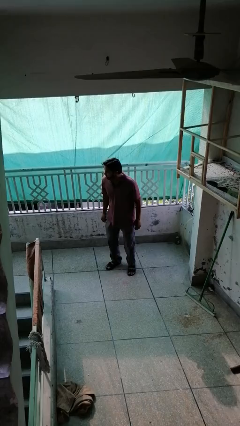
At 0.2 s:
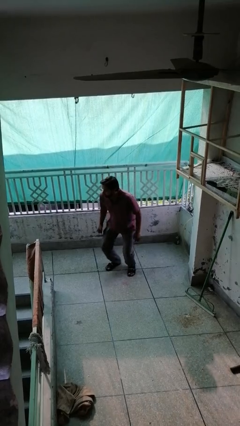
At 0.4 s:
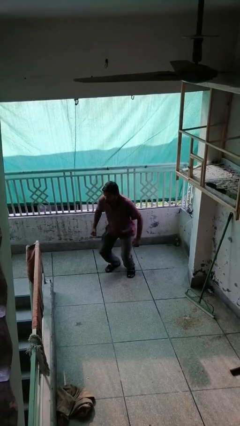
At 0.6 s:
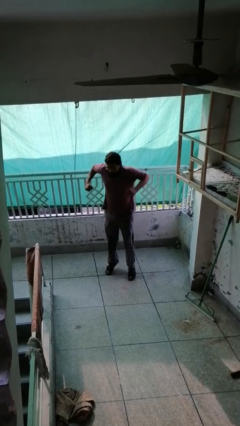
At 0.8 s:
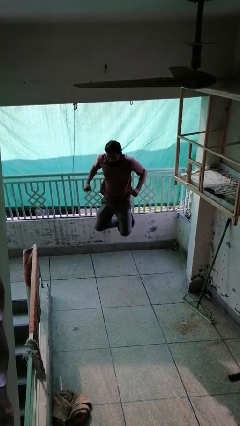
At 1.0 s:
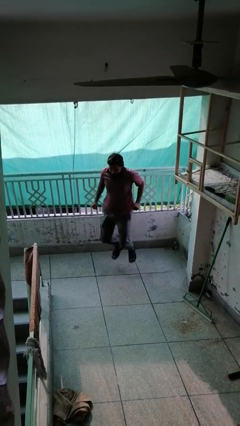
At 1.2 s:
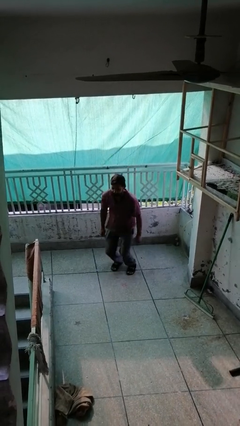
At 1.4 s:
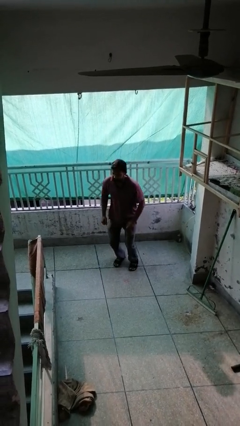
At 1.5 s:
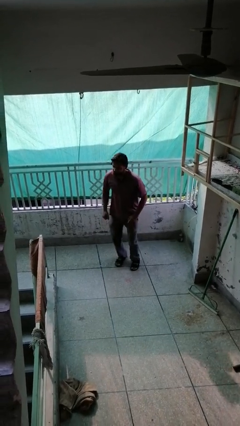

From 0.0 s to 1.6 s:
person jumps

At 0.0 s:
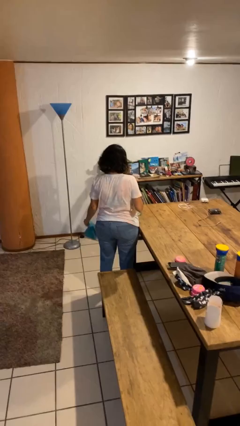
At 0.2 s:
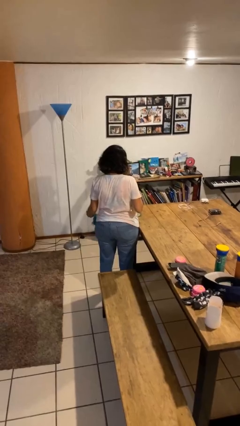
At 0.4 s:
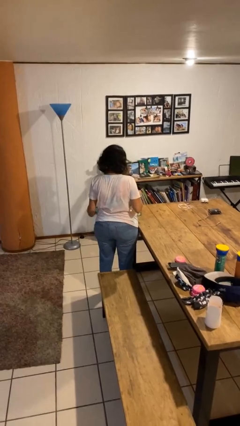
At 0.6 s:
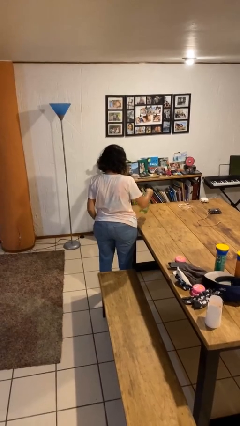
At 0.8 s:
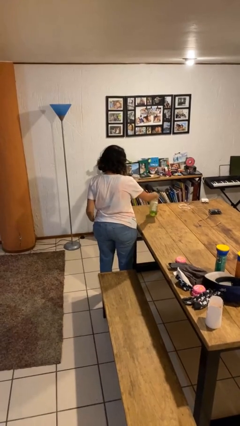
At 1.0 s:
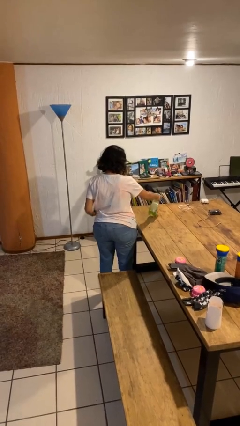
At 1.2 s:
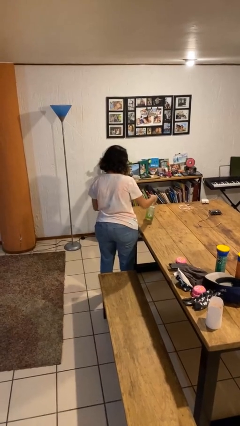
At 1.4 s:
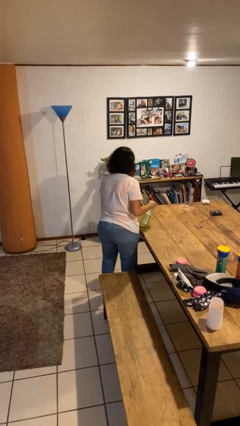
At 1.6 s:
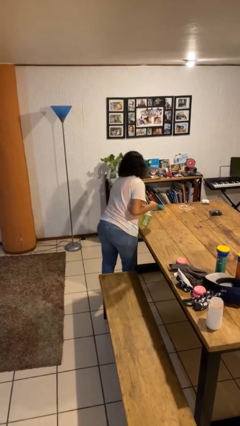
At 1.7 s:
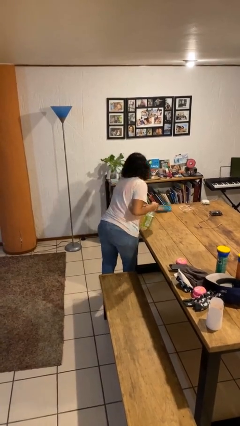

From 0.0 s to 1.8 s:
person sprays from bottle

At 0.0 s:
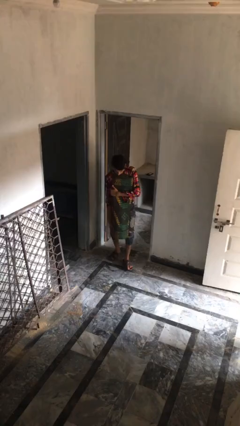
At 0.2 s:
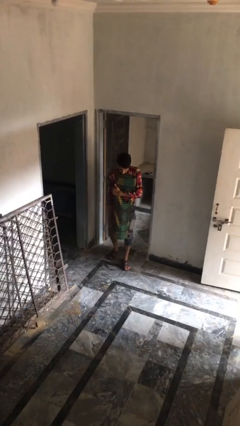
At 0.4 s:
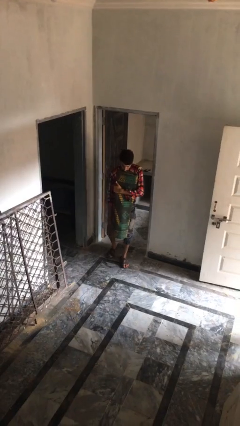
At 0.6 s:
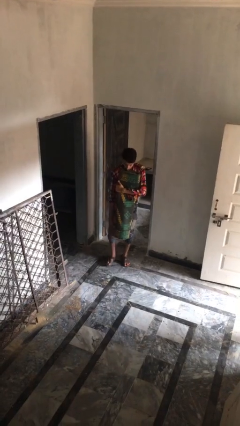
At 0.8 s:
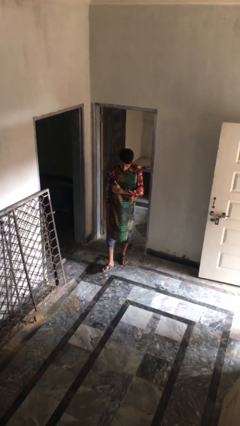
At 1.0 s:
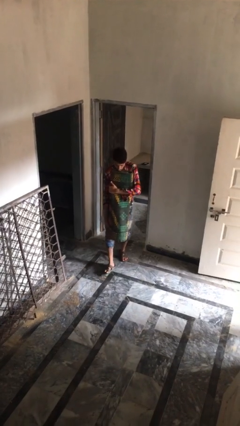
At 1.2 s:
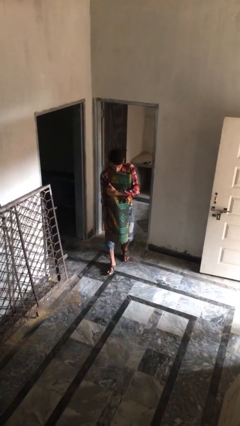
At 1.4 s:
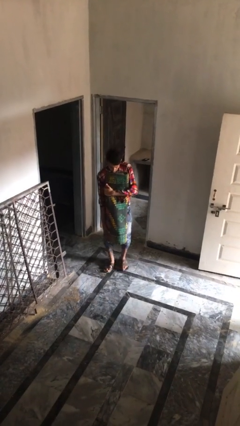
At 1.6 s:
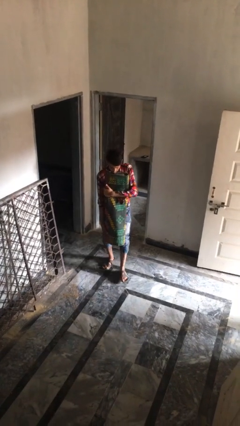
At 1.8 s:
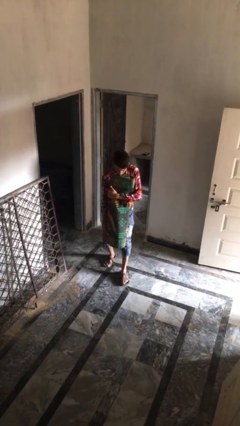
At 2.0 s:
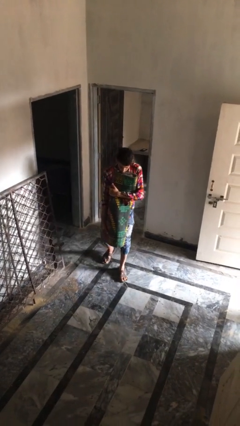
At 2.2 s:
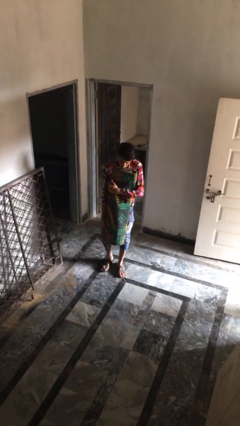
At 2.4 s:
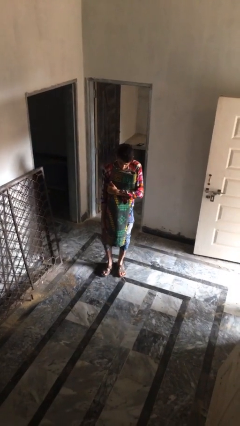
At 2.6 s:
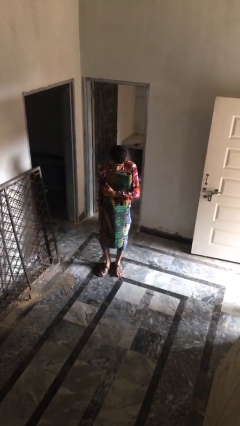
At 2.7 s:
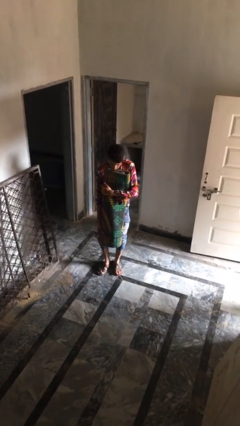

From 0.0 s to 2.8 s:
person carries heavy object

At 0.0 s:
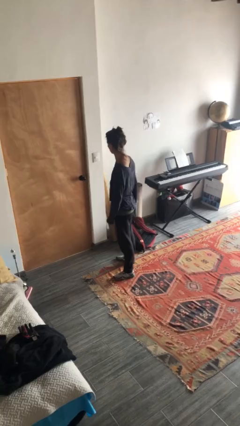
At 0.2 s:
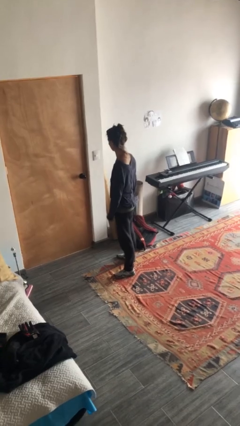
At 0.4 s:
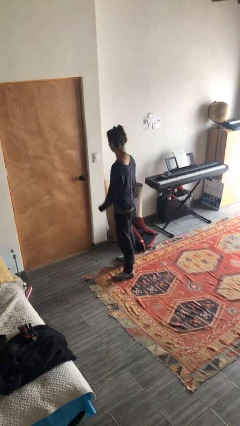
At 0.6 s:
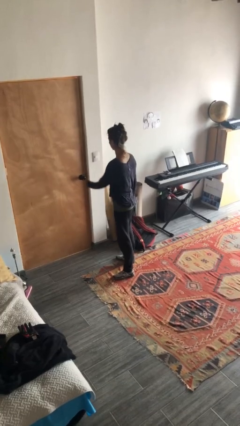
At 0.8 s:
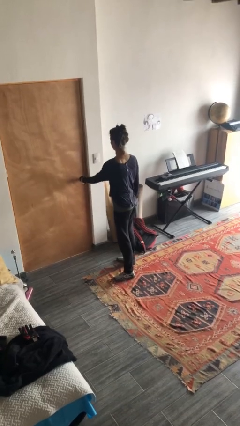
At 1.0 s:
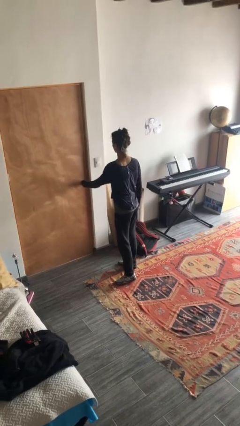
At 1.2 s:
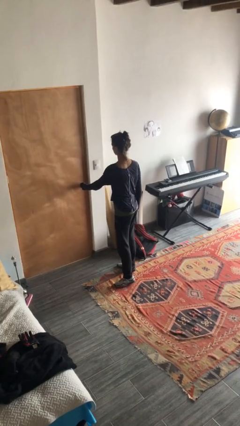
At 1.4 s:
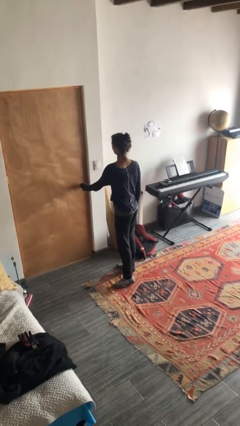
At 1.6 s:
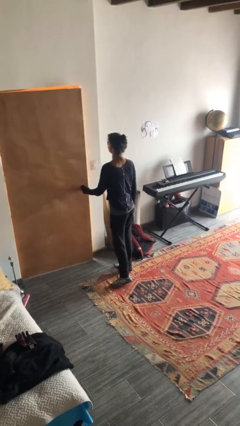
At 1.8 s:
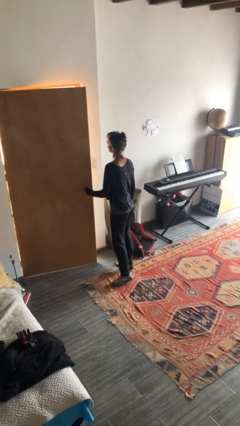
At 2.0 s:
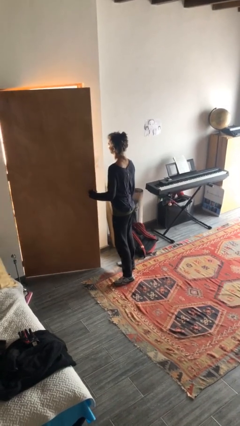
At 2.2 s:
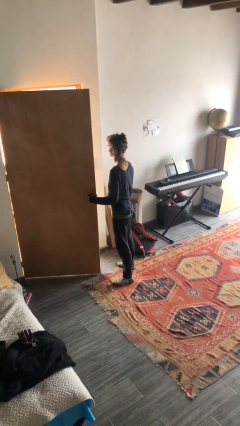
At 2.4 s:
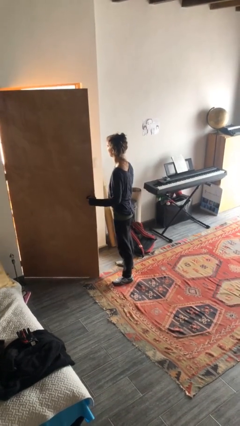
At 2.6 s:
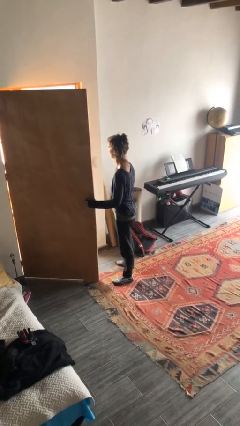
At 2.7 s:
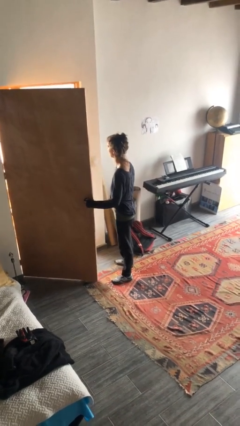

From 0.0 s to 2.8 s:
person opens facility door

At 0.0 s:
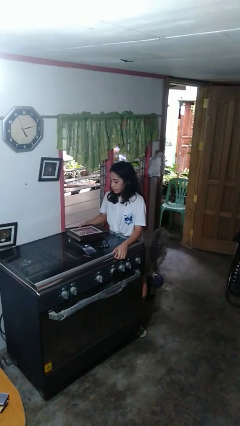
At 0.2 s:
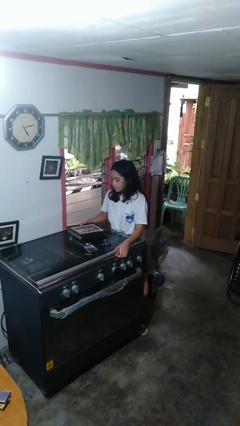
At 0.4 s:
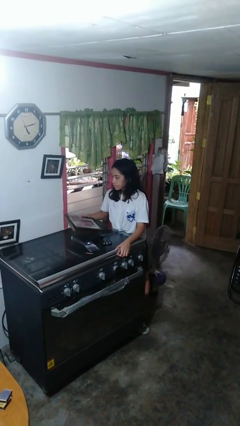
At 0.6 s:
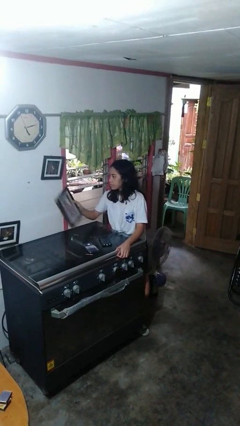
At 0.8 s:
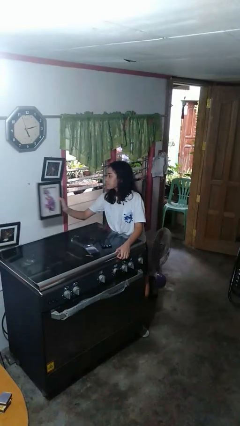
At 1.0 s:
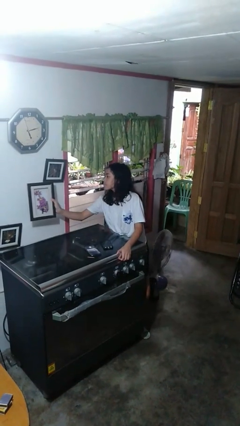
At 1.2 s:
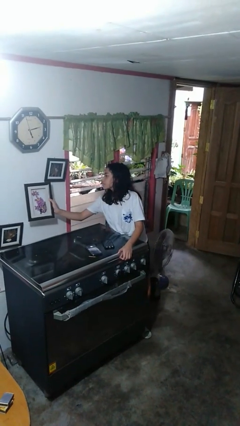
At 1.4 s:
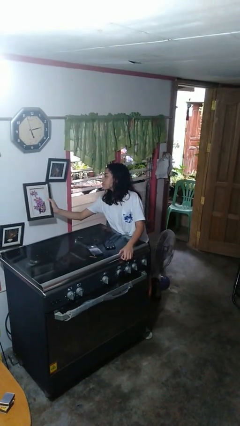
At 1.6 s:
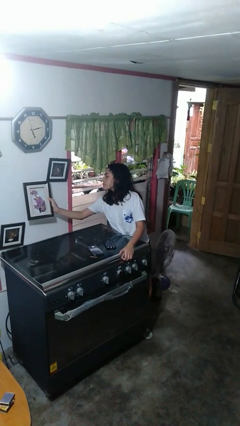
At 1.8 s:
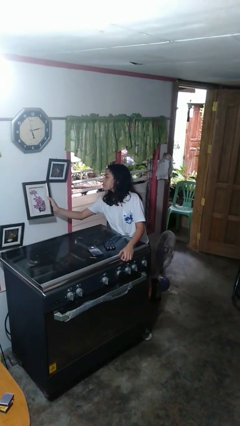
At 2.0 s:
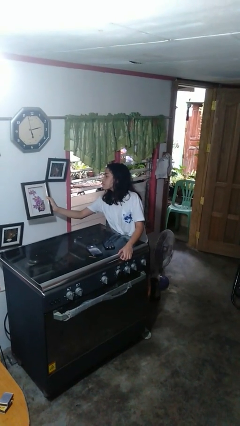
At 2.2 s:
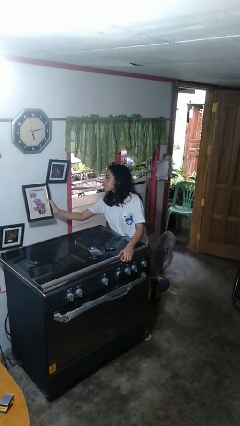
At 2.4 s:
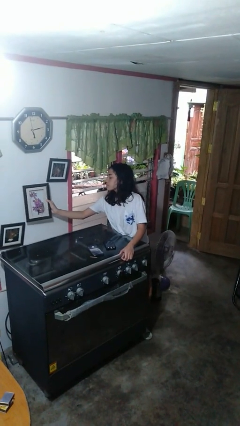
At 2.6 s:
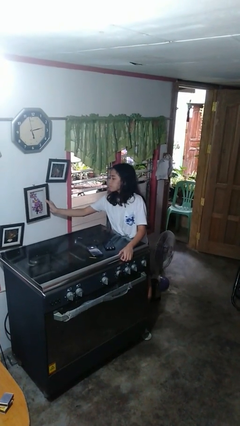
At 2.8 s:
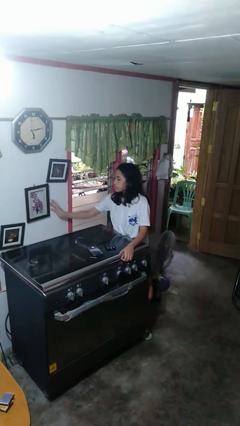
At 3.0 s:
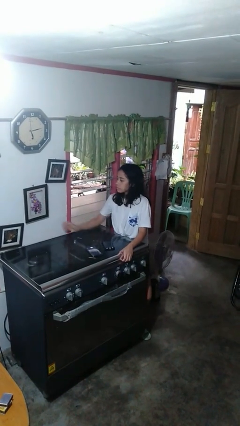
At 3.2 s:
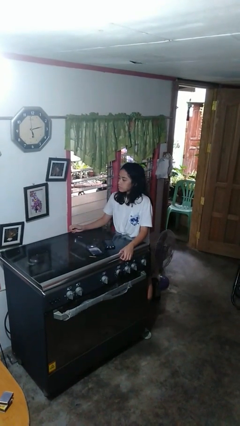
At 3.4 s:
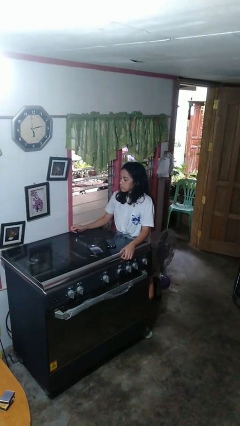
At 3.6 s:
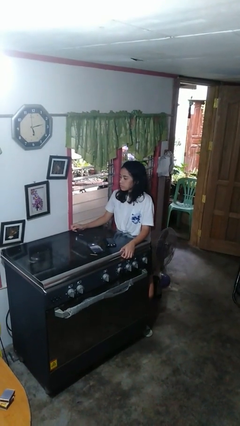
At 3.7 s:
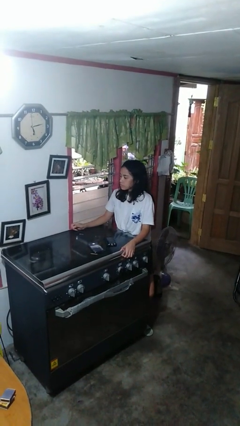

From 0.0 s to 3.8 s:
person puts up picture frame

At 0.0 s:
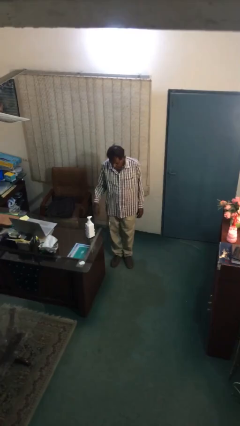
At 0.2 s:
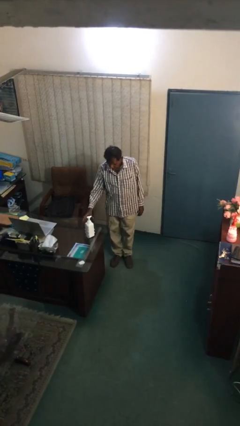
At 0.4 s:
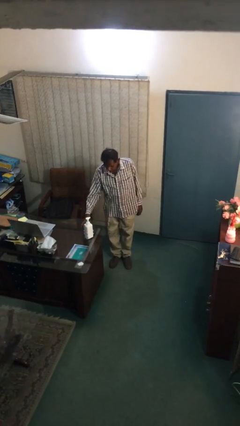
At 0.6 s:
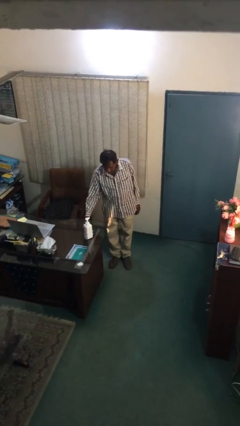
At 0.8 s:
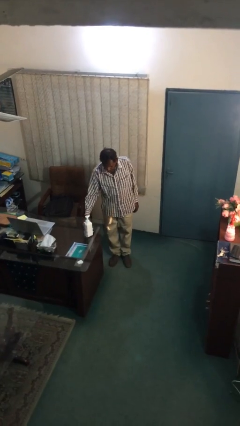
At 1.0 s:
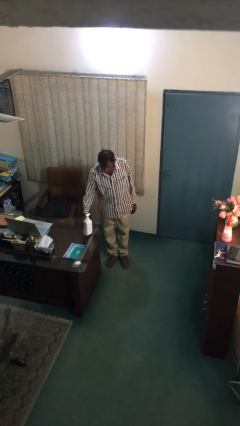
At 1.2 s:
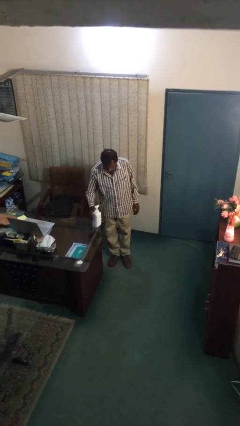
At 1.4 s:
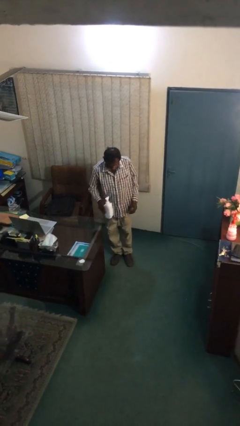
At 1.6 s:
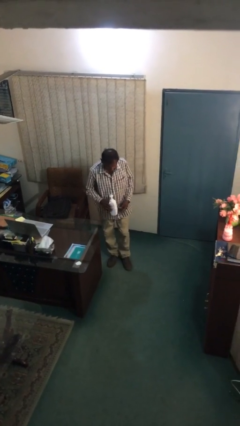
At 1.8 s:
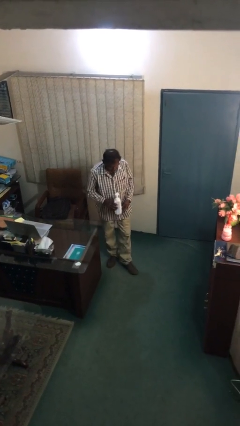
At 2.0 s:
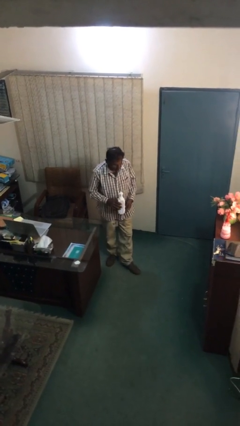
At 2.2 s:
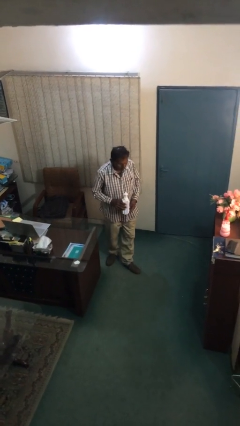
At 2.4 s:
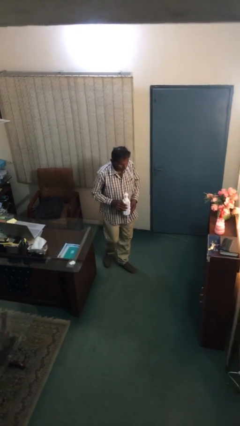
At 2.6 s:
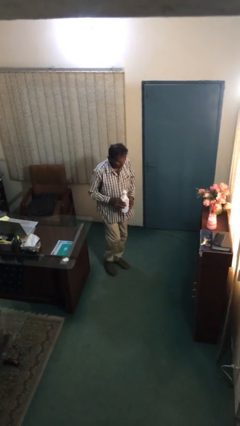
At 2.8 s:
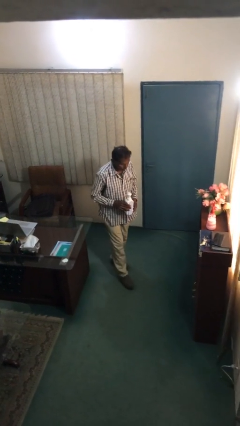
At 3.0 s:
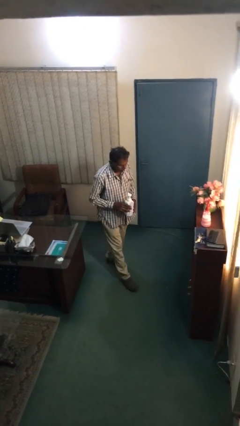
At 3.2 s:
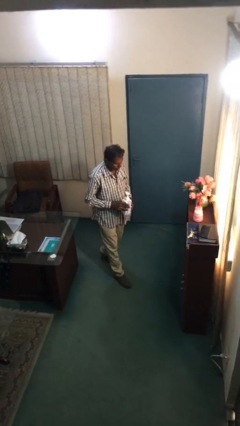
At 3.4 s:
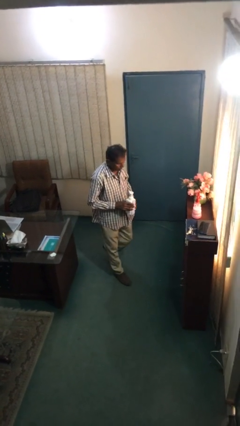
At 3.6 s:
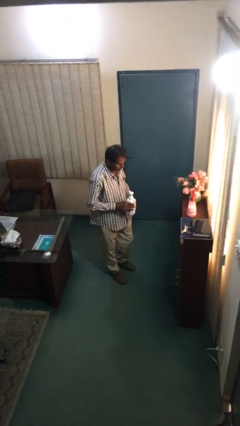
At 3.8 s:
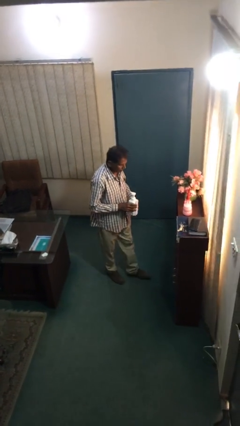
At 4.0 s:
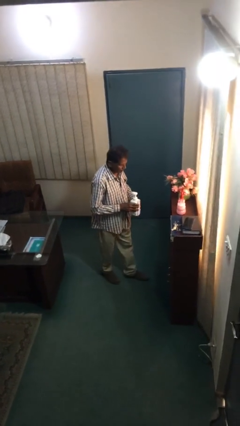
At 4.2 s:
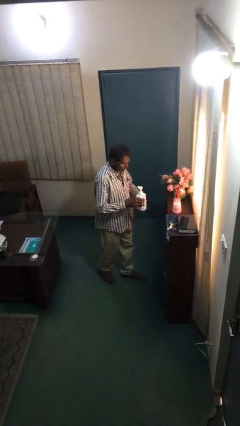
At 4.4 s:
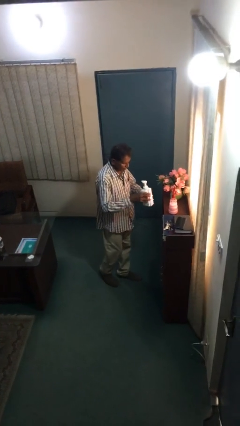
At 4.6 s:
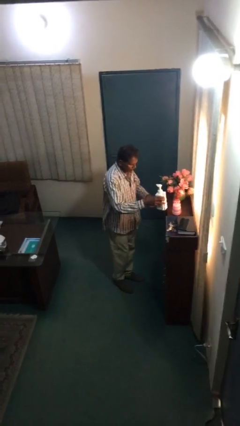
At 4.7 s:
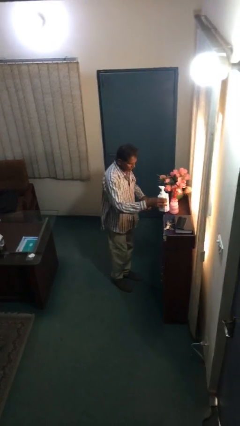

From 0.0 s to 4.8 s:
person picks up object from table
